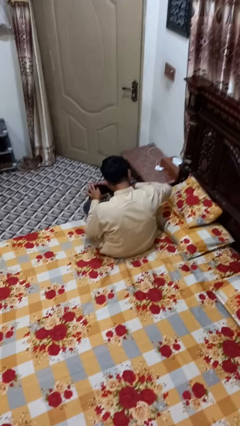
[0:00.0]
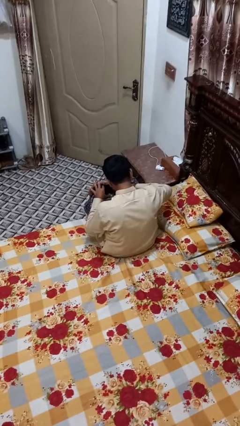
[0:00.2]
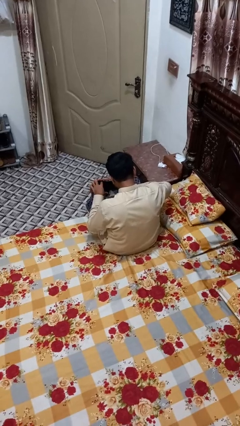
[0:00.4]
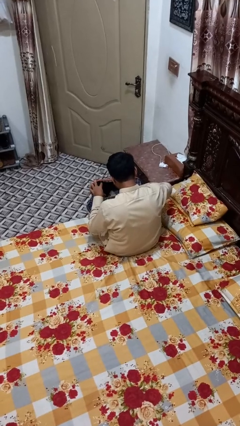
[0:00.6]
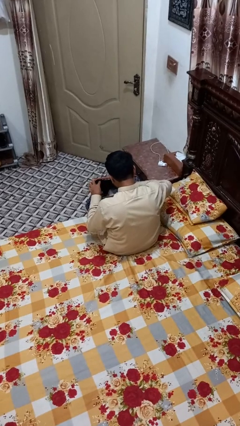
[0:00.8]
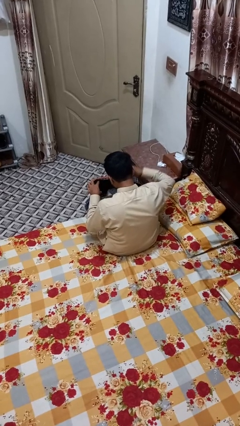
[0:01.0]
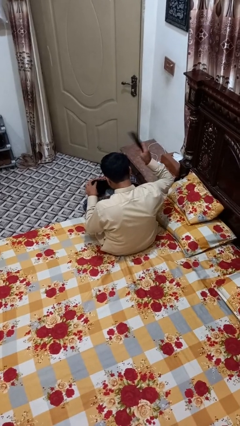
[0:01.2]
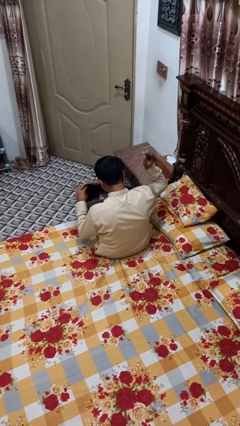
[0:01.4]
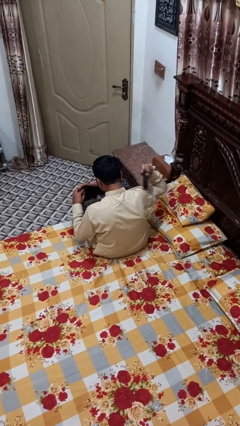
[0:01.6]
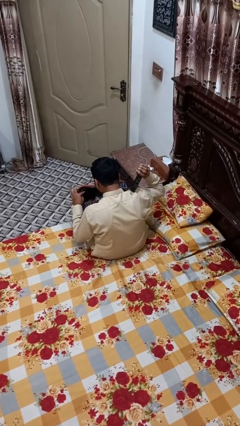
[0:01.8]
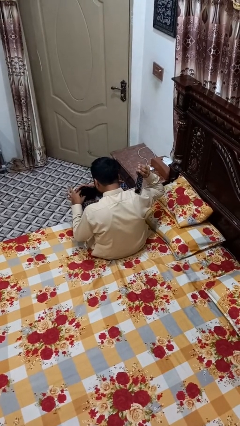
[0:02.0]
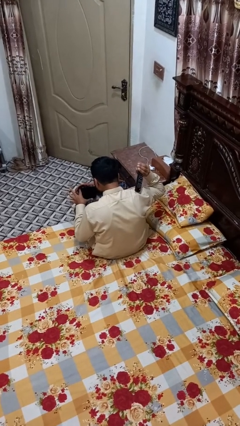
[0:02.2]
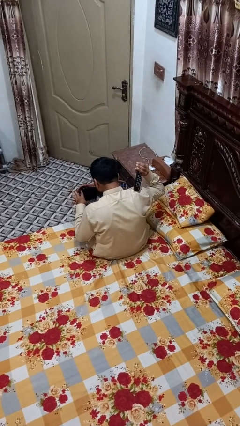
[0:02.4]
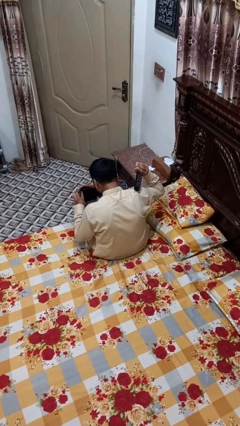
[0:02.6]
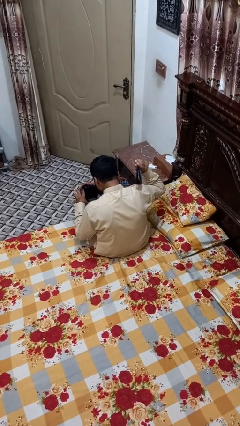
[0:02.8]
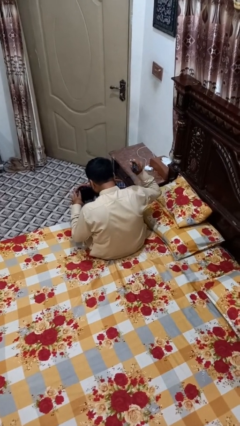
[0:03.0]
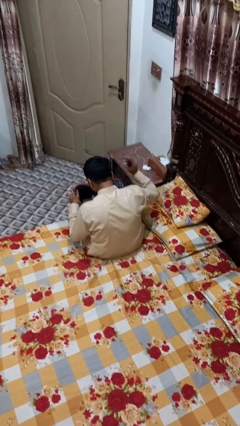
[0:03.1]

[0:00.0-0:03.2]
person takes object from bag

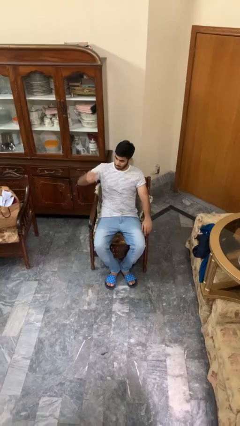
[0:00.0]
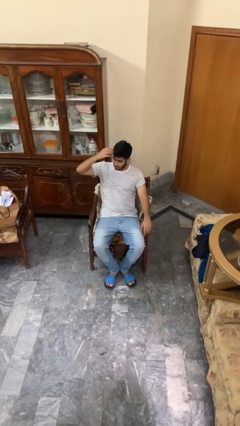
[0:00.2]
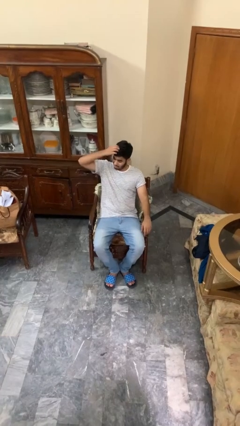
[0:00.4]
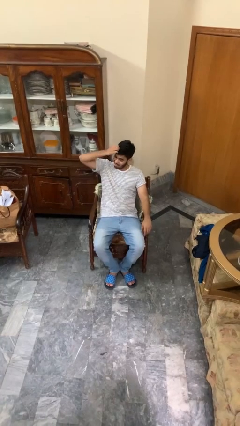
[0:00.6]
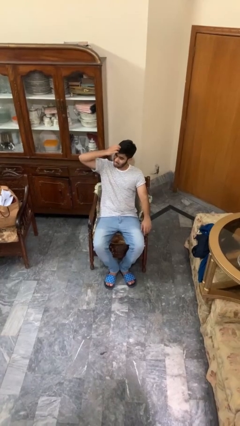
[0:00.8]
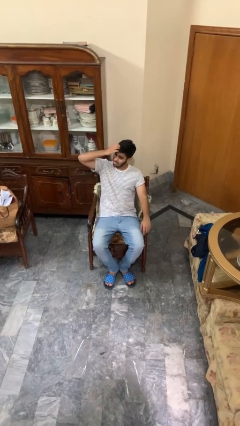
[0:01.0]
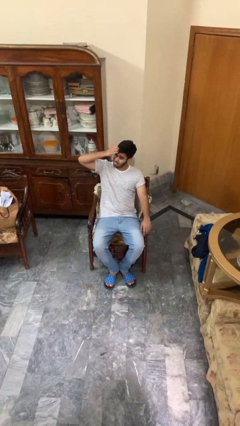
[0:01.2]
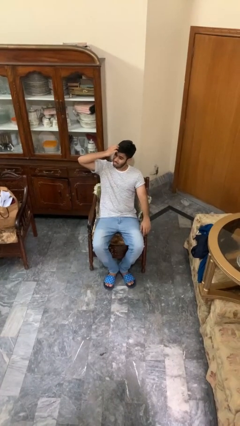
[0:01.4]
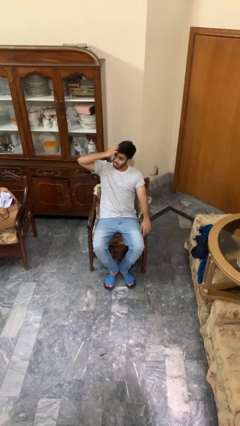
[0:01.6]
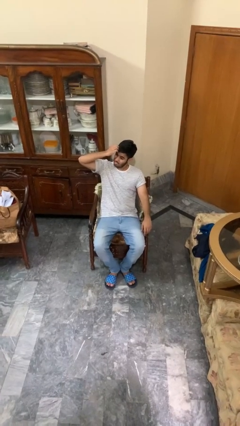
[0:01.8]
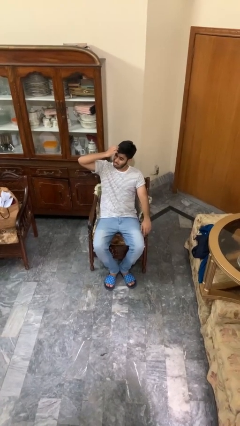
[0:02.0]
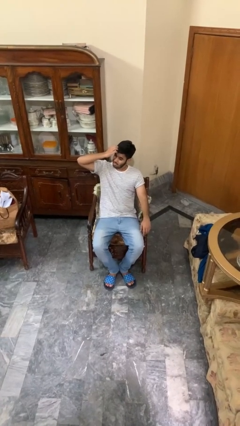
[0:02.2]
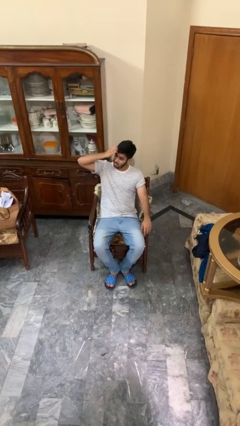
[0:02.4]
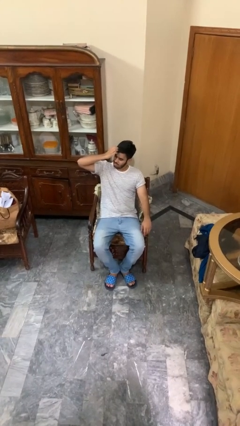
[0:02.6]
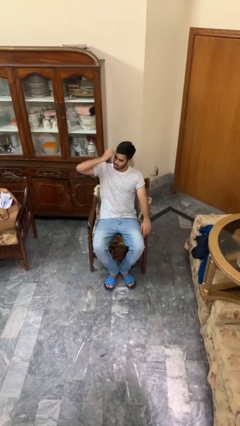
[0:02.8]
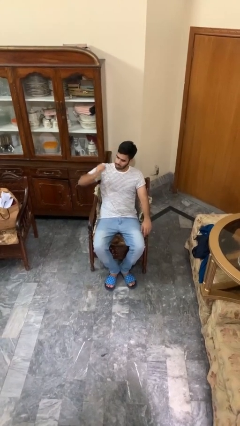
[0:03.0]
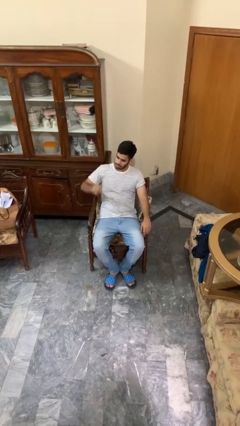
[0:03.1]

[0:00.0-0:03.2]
person strokes hair

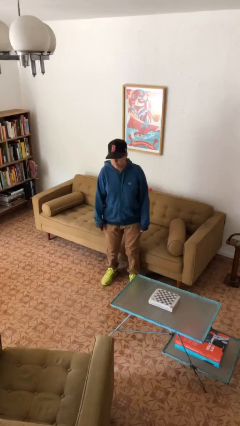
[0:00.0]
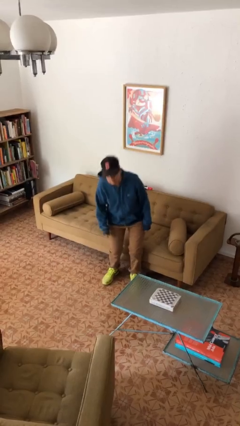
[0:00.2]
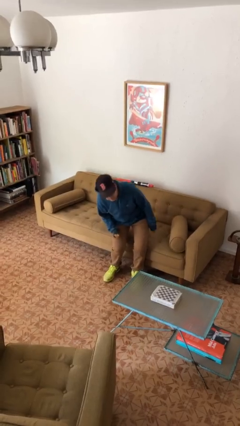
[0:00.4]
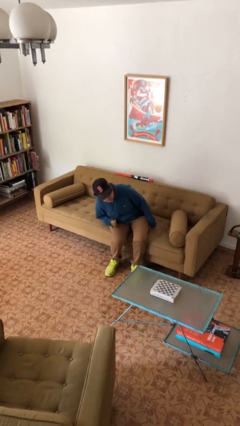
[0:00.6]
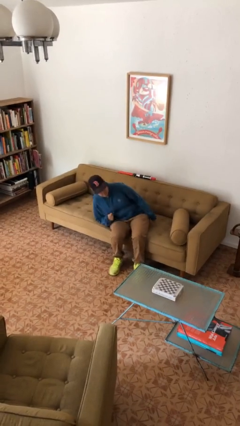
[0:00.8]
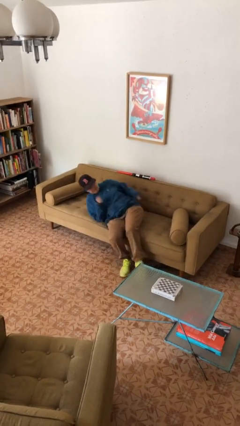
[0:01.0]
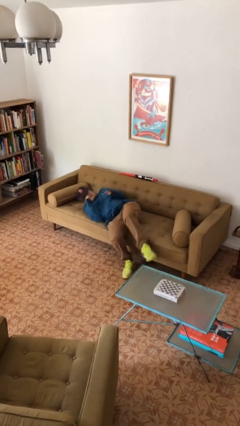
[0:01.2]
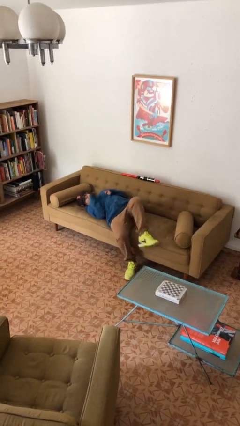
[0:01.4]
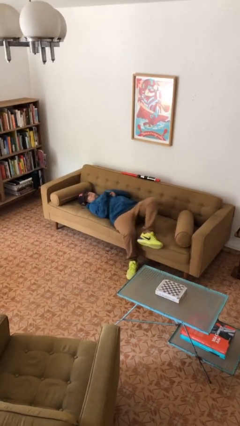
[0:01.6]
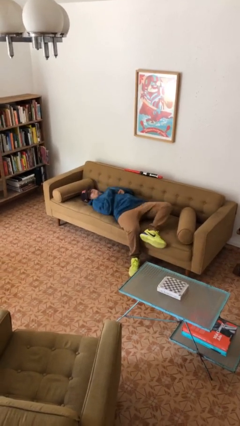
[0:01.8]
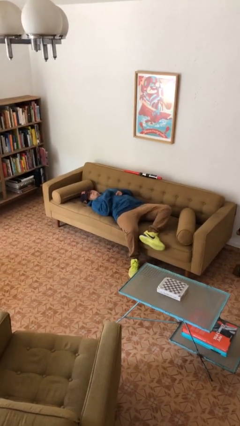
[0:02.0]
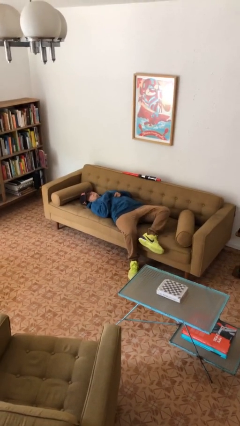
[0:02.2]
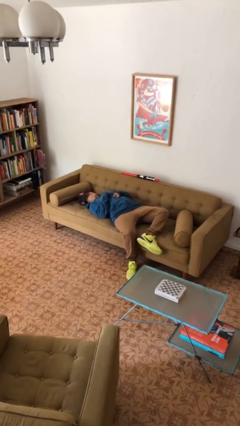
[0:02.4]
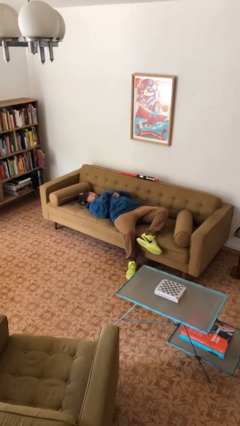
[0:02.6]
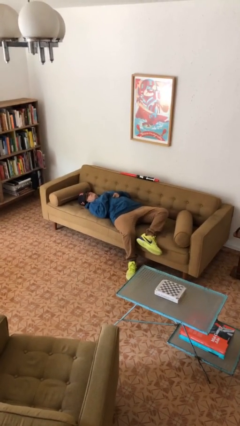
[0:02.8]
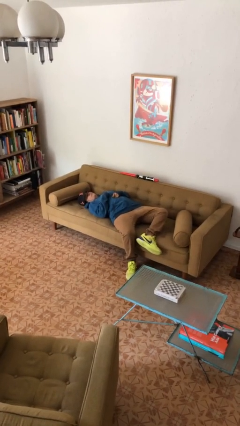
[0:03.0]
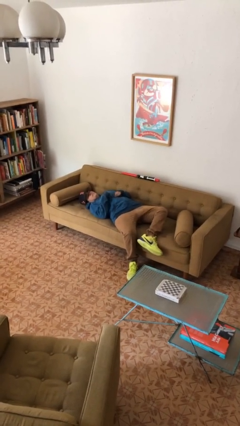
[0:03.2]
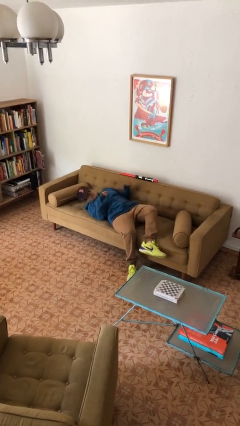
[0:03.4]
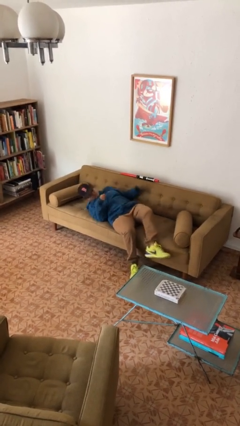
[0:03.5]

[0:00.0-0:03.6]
person lies down on couch

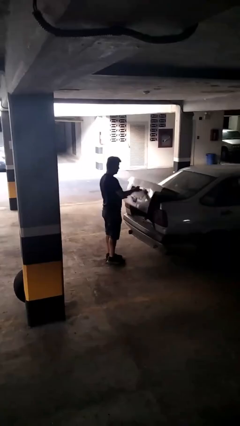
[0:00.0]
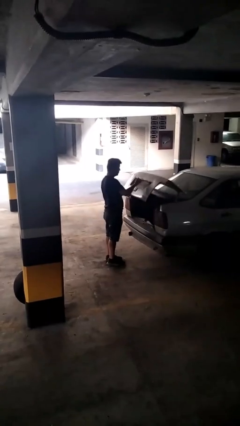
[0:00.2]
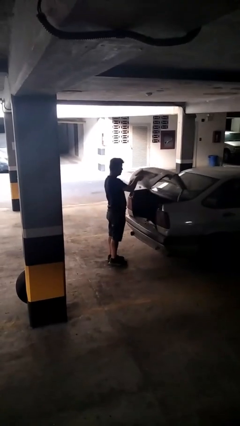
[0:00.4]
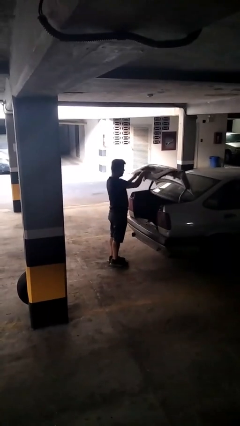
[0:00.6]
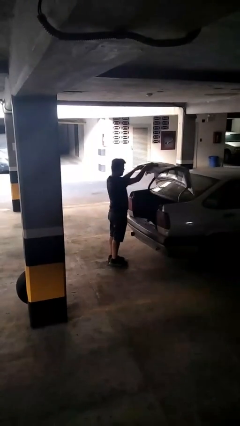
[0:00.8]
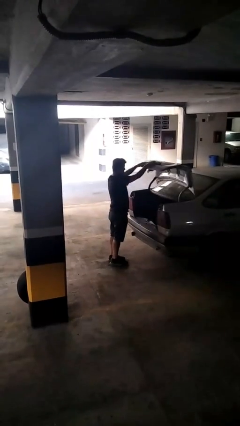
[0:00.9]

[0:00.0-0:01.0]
person opens car trunk

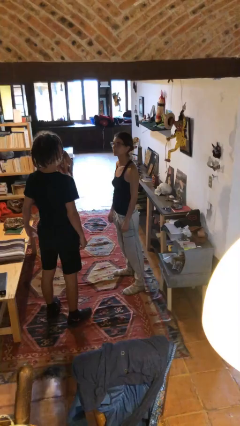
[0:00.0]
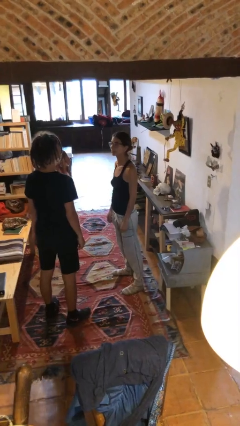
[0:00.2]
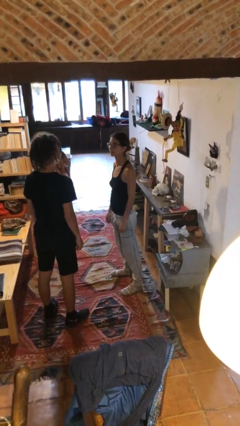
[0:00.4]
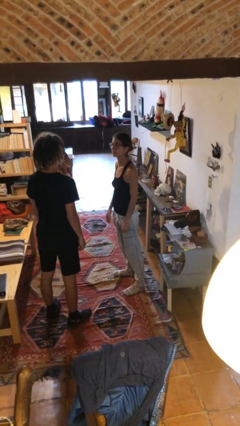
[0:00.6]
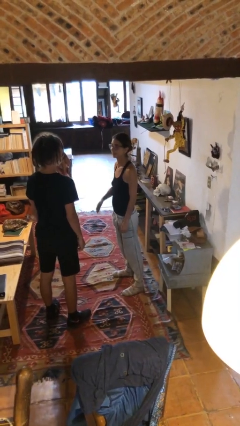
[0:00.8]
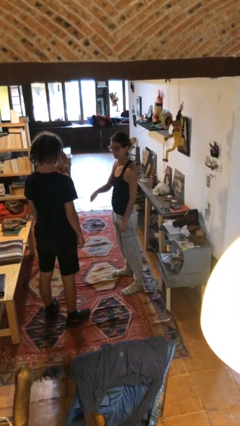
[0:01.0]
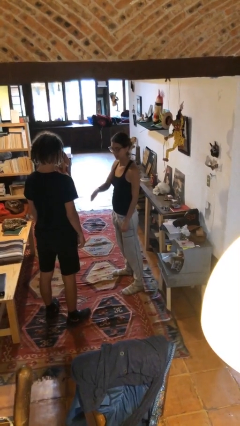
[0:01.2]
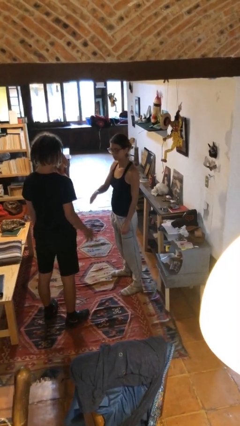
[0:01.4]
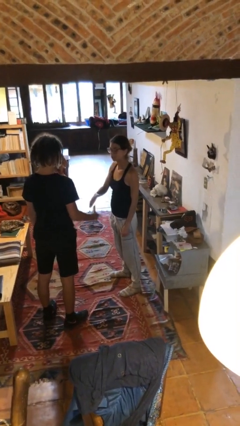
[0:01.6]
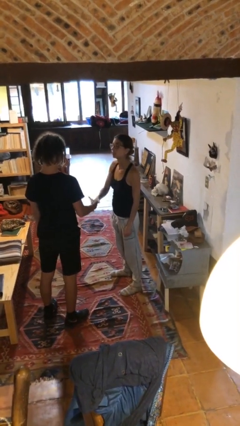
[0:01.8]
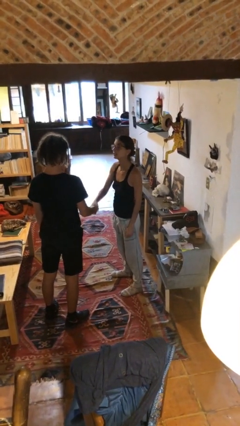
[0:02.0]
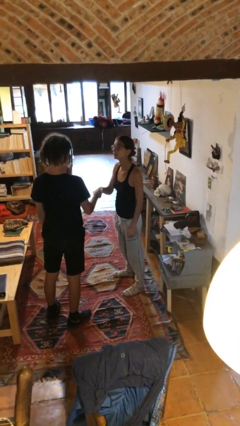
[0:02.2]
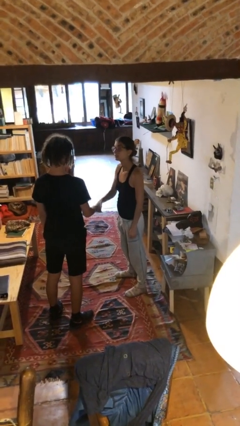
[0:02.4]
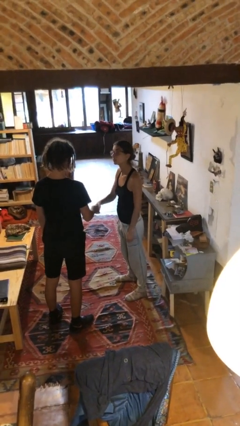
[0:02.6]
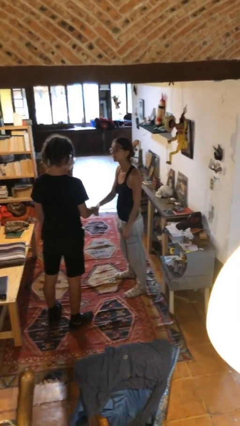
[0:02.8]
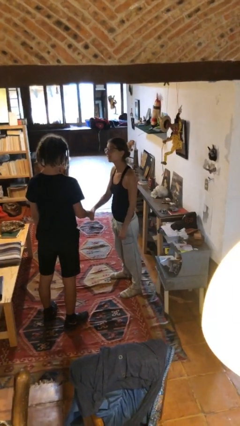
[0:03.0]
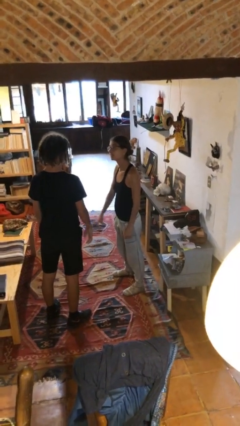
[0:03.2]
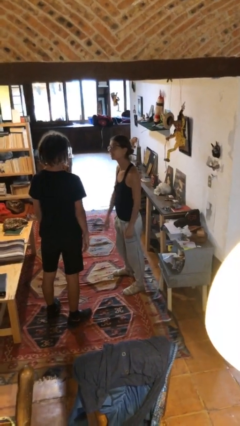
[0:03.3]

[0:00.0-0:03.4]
person shakes hand

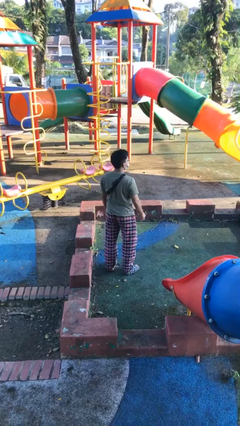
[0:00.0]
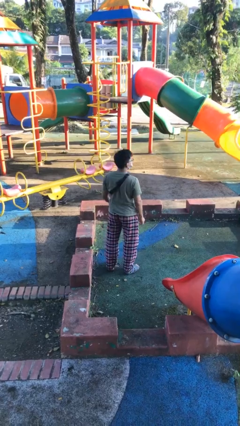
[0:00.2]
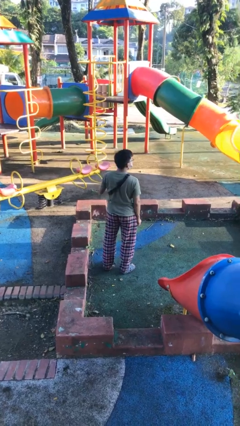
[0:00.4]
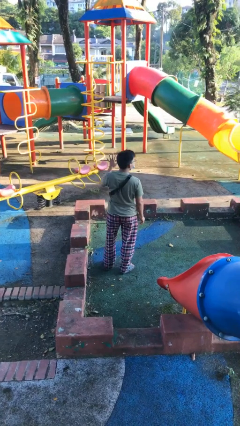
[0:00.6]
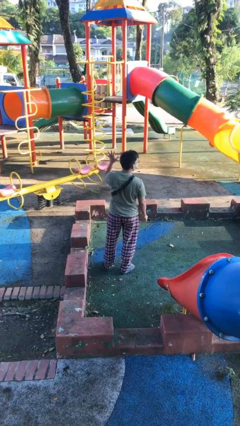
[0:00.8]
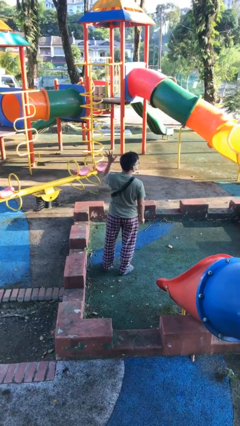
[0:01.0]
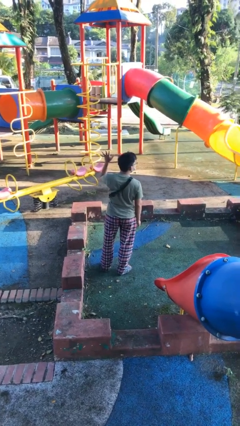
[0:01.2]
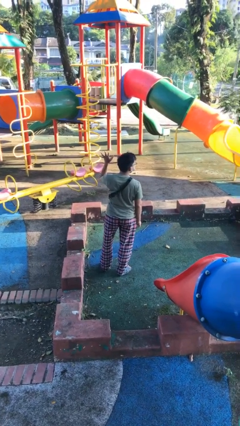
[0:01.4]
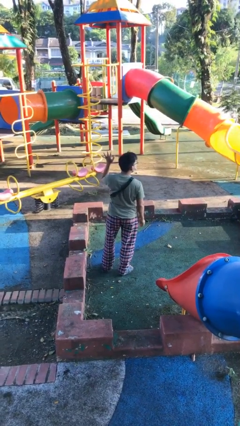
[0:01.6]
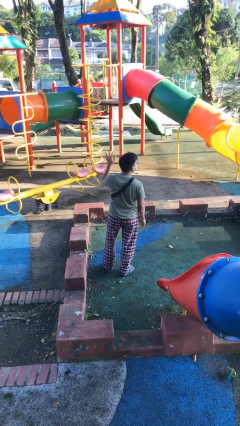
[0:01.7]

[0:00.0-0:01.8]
person gestures number five

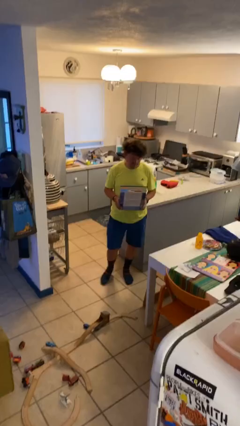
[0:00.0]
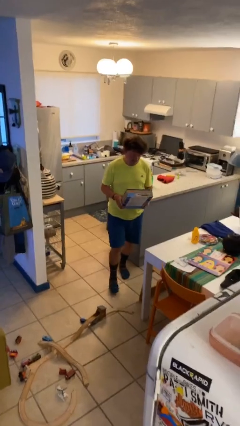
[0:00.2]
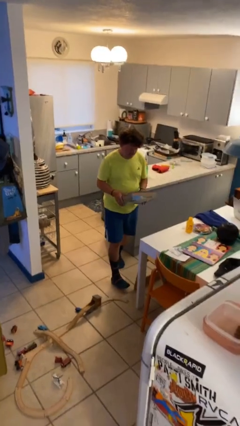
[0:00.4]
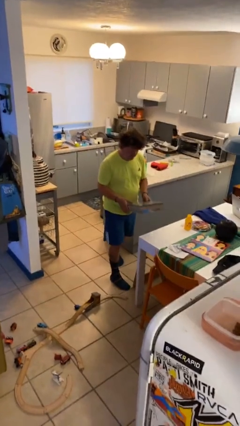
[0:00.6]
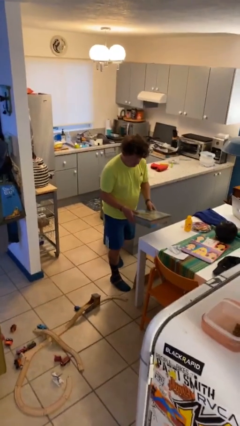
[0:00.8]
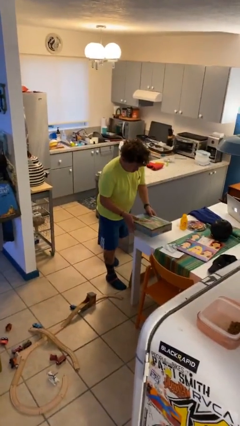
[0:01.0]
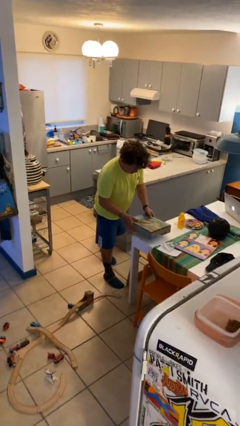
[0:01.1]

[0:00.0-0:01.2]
person puts down object on table
